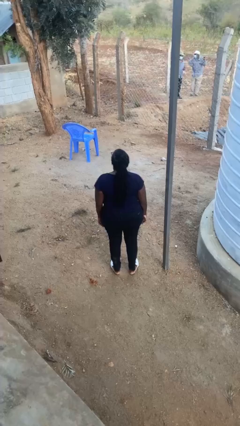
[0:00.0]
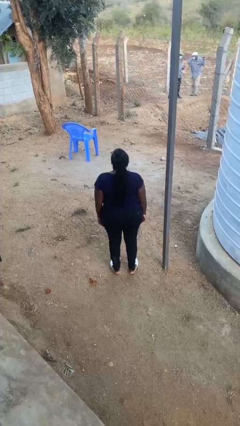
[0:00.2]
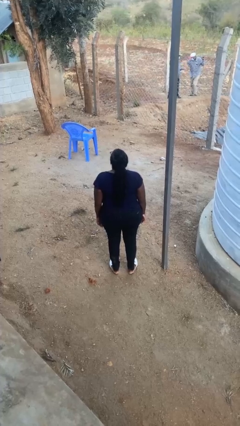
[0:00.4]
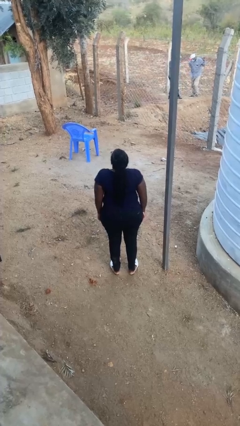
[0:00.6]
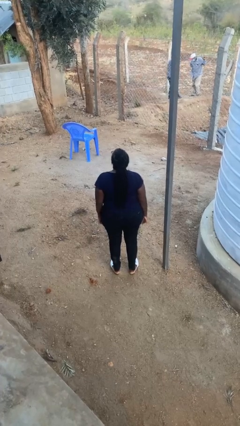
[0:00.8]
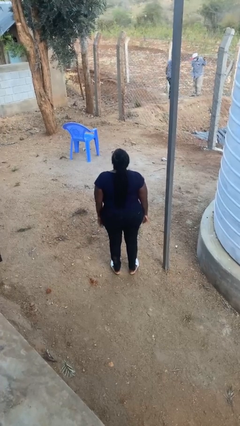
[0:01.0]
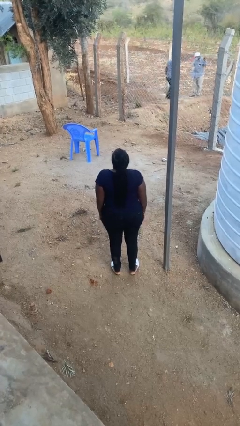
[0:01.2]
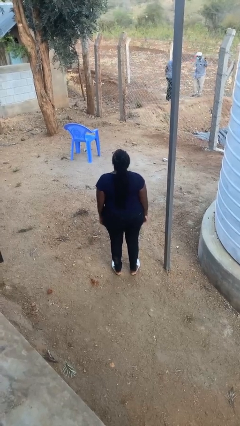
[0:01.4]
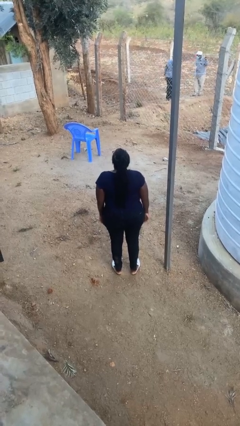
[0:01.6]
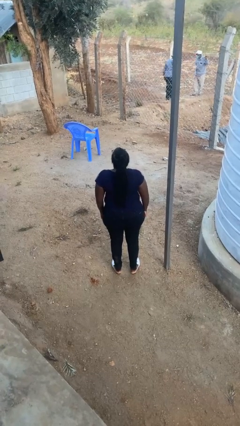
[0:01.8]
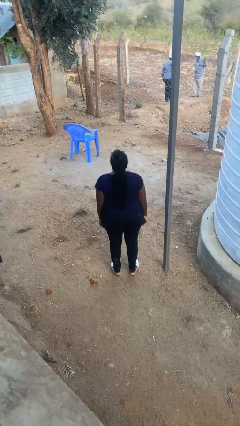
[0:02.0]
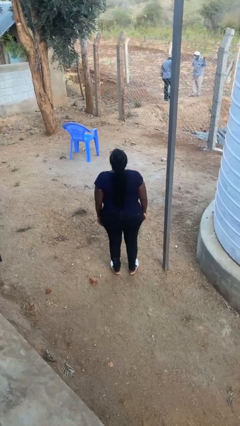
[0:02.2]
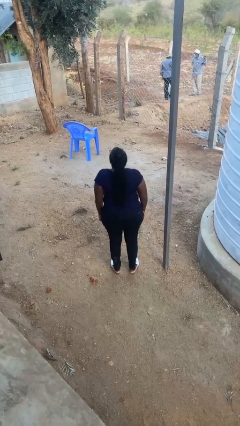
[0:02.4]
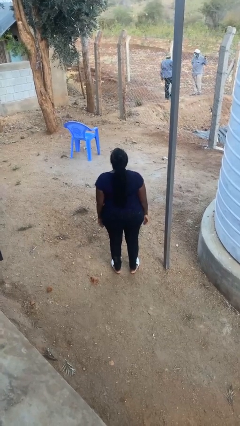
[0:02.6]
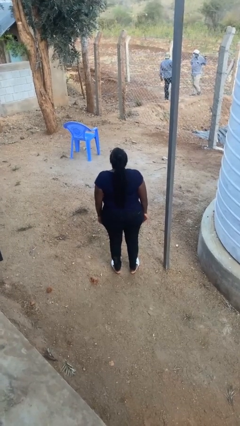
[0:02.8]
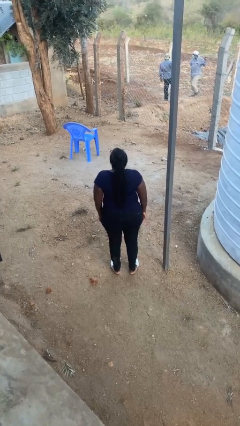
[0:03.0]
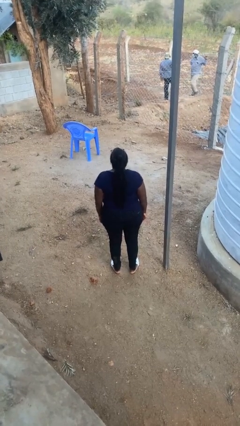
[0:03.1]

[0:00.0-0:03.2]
person shrugs

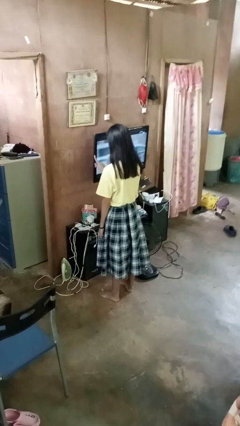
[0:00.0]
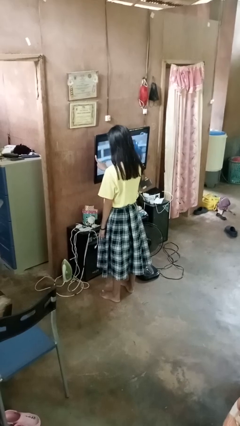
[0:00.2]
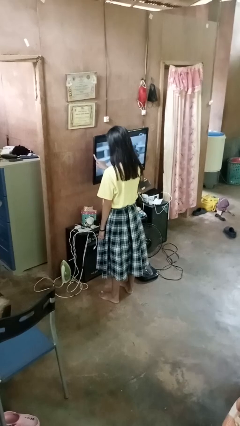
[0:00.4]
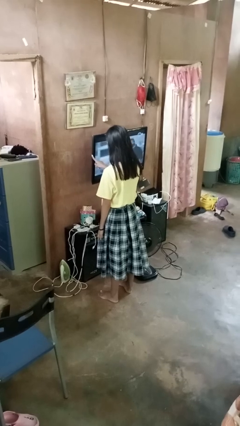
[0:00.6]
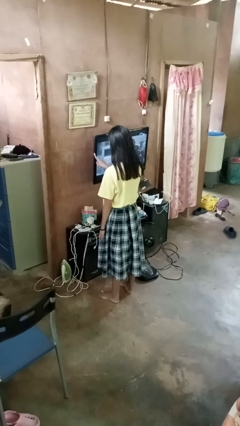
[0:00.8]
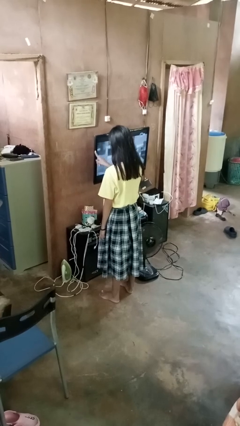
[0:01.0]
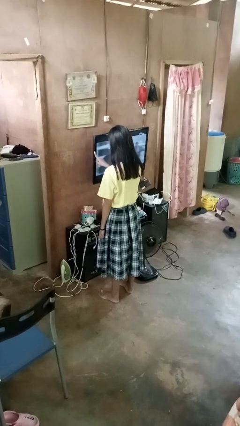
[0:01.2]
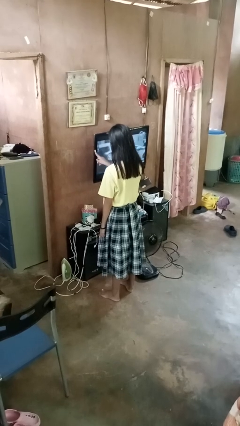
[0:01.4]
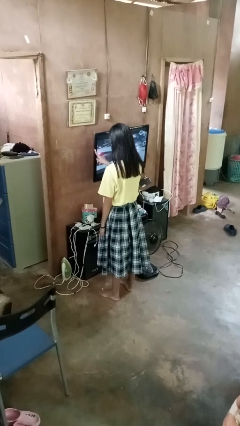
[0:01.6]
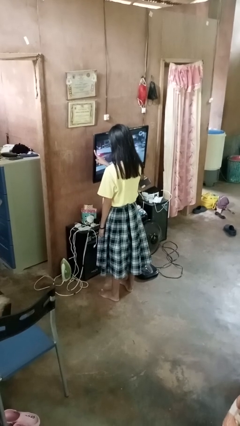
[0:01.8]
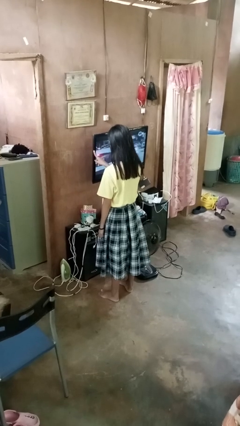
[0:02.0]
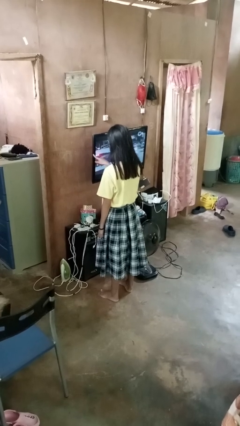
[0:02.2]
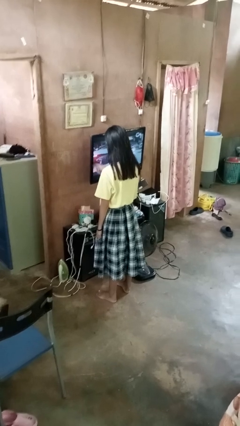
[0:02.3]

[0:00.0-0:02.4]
person taps object with finger

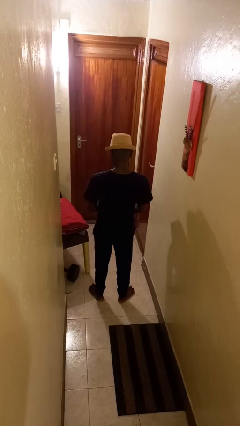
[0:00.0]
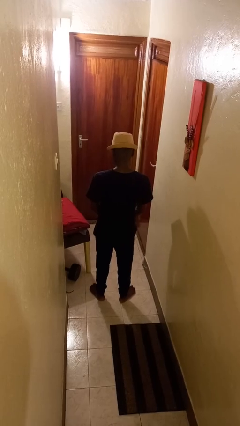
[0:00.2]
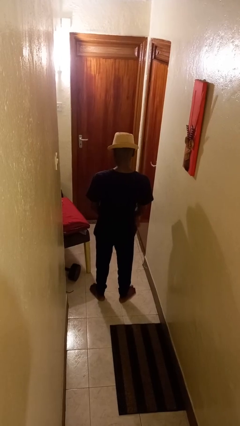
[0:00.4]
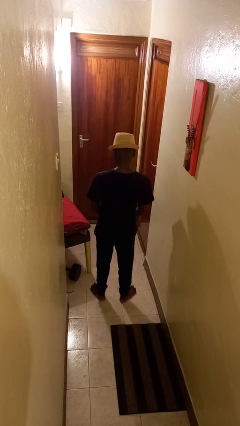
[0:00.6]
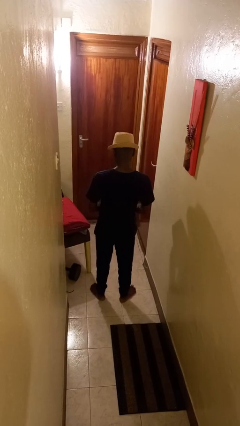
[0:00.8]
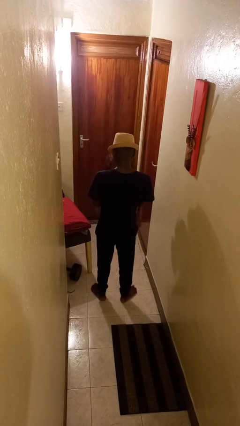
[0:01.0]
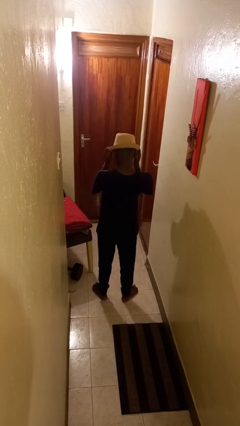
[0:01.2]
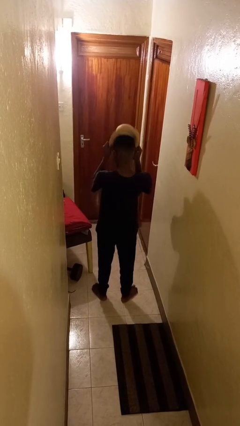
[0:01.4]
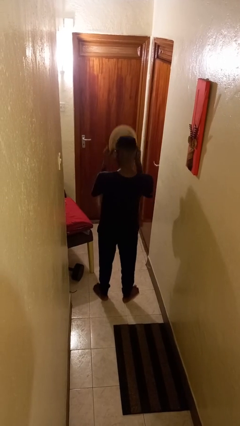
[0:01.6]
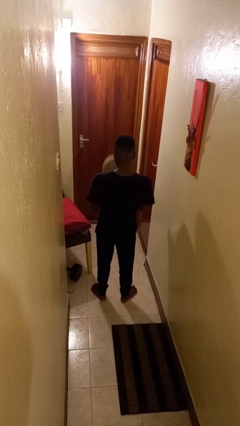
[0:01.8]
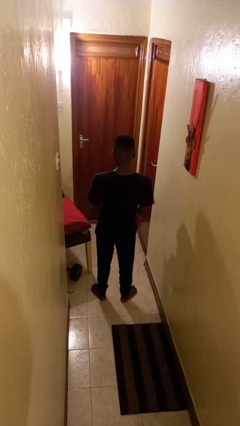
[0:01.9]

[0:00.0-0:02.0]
person takes off hat

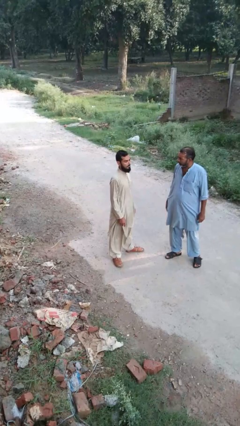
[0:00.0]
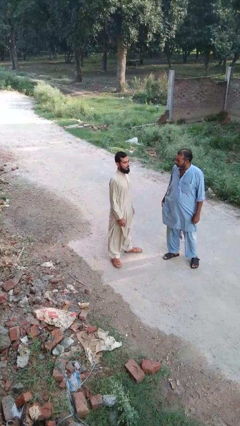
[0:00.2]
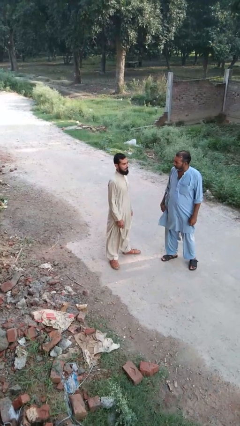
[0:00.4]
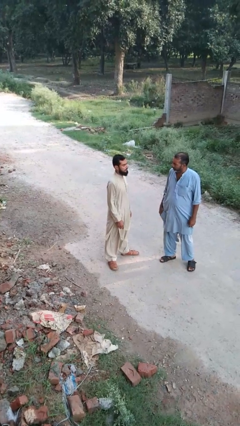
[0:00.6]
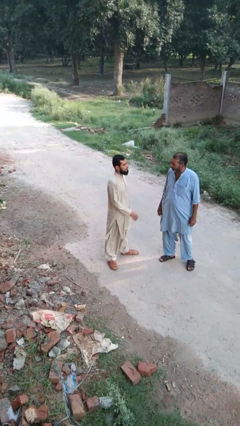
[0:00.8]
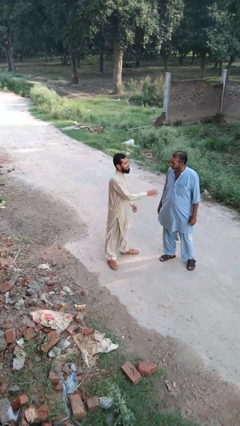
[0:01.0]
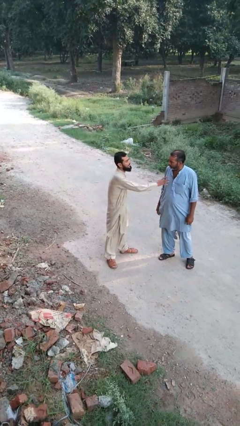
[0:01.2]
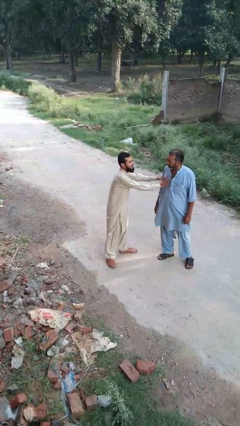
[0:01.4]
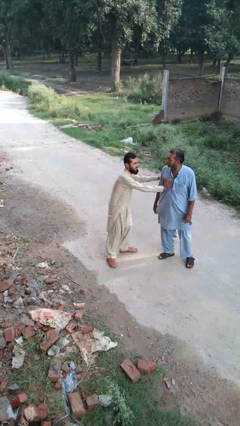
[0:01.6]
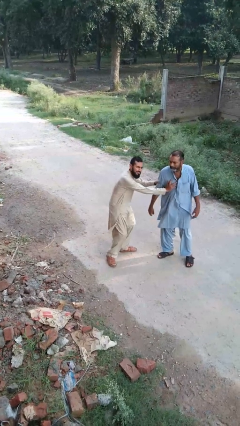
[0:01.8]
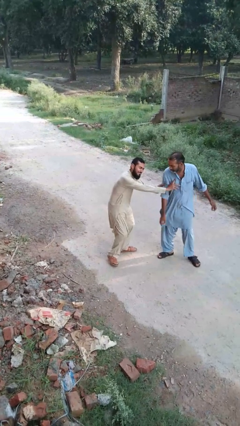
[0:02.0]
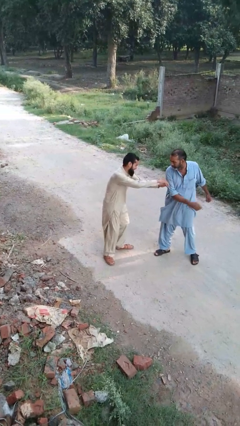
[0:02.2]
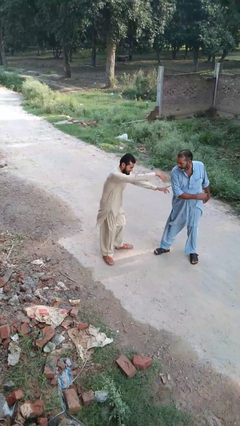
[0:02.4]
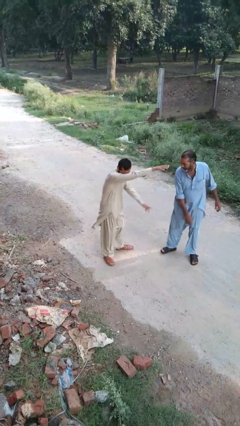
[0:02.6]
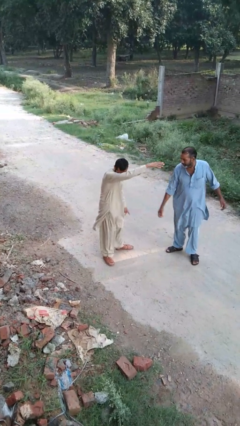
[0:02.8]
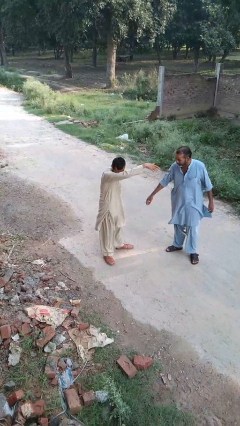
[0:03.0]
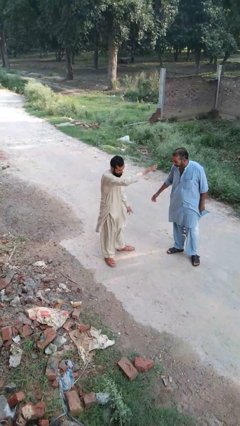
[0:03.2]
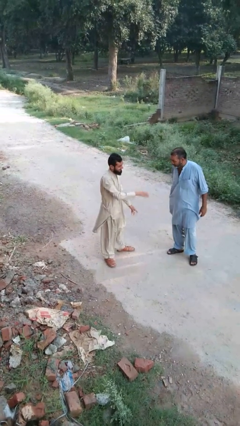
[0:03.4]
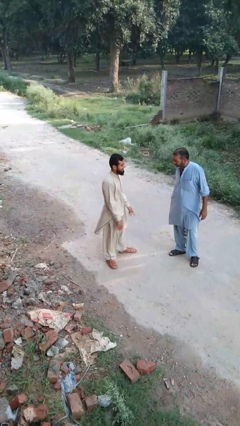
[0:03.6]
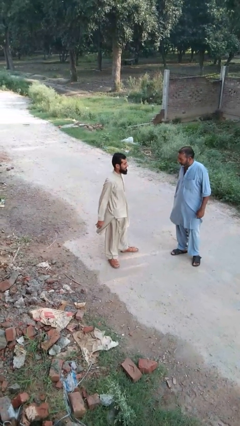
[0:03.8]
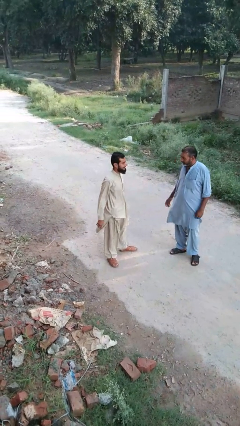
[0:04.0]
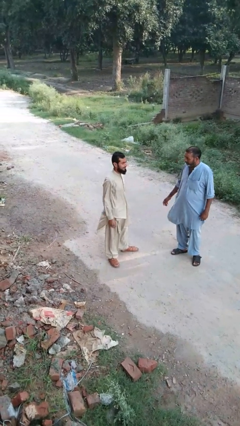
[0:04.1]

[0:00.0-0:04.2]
person shoves person

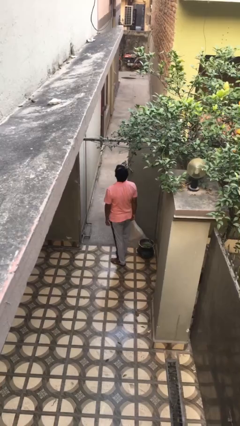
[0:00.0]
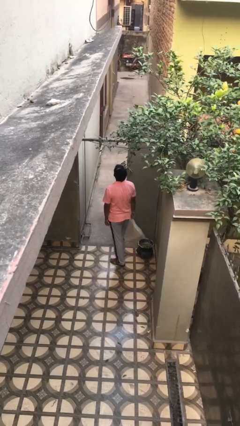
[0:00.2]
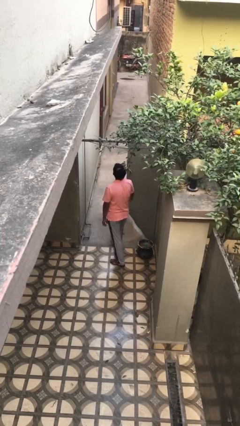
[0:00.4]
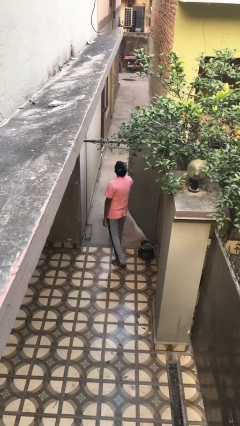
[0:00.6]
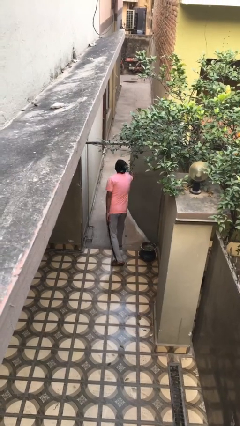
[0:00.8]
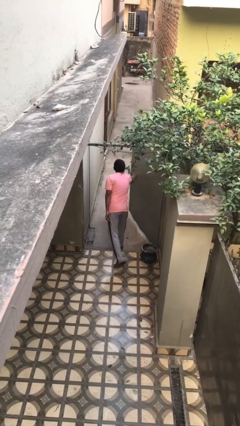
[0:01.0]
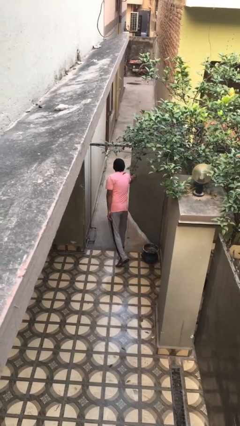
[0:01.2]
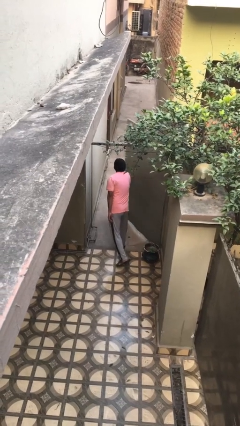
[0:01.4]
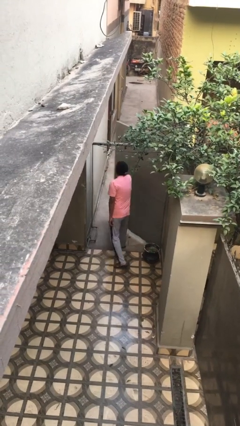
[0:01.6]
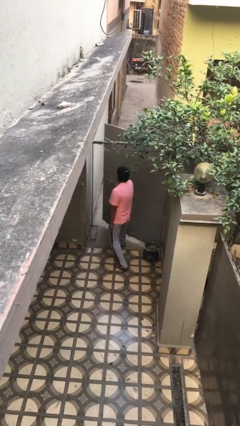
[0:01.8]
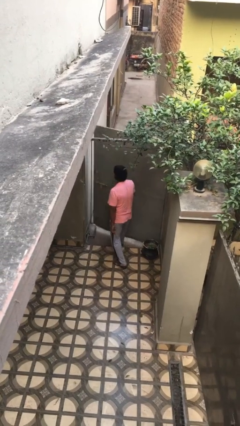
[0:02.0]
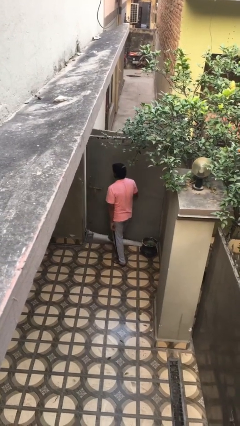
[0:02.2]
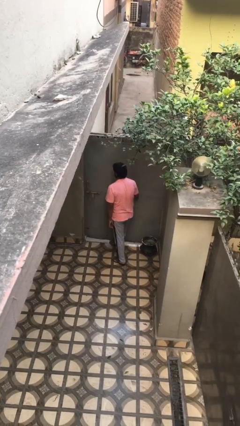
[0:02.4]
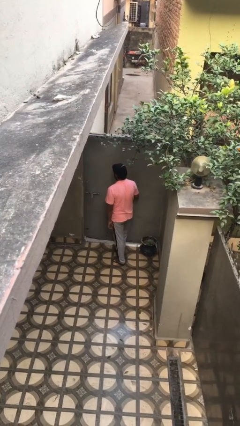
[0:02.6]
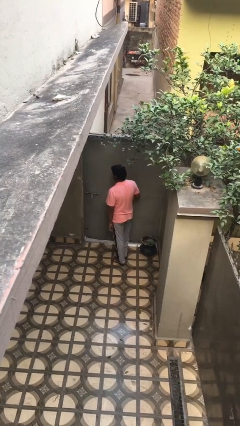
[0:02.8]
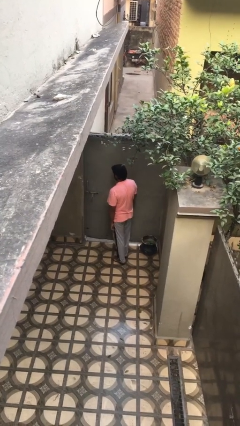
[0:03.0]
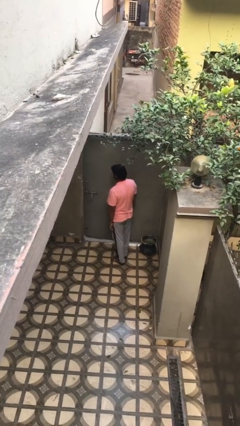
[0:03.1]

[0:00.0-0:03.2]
person closes facility door

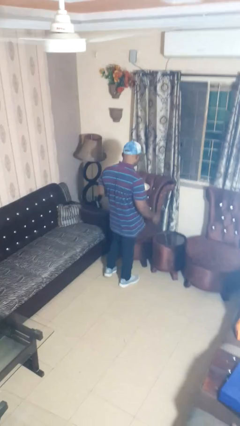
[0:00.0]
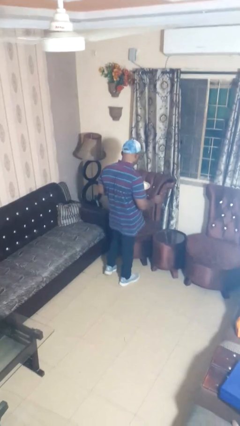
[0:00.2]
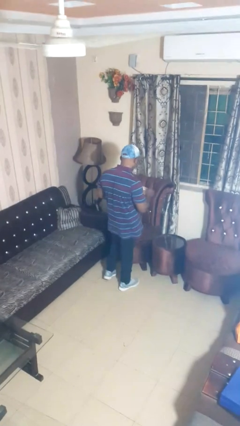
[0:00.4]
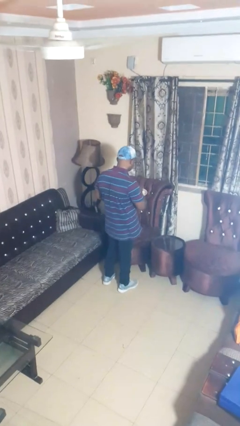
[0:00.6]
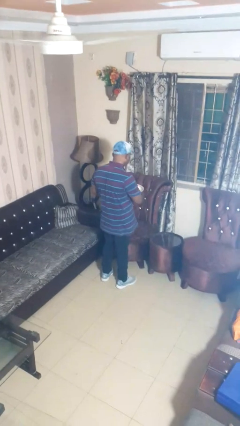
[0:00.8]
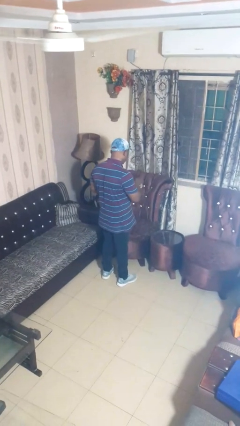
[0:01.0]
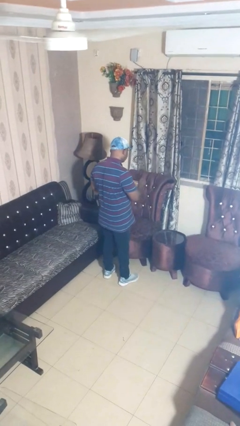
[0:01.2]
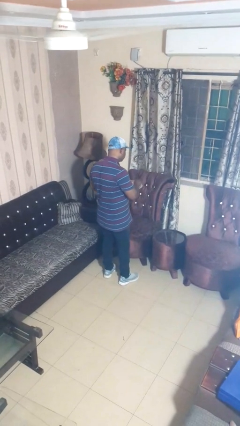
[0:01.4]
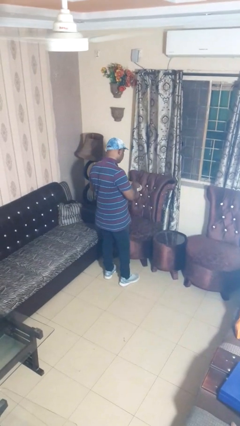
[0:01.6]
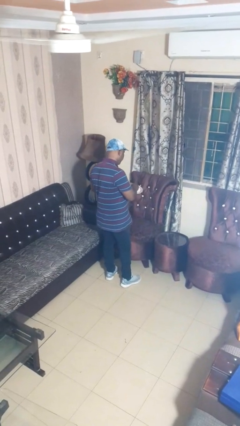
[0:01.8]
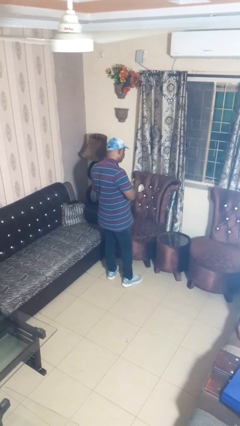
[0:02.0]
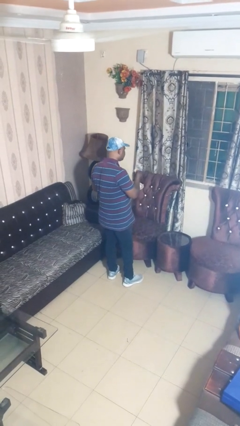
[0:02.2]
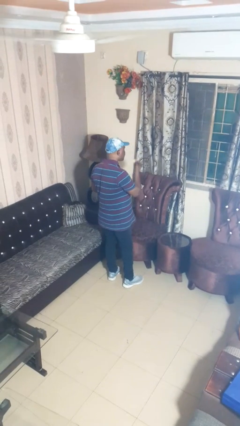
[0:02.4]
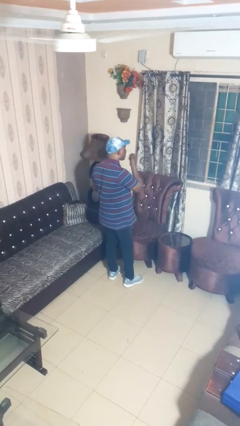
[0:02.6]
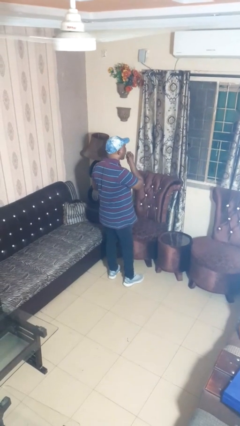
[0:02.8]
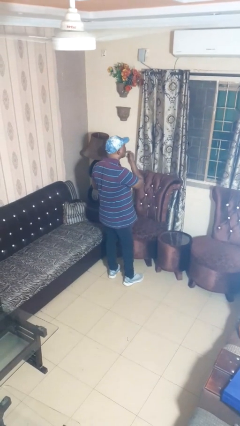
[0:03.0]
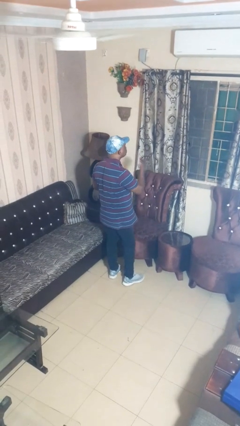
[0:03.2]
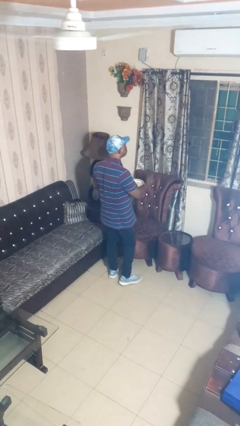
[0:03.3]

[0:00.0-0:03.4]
person eats with hands
